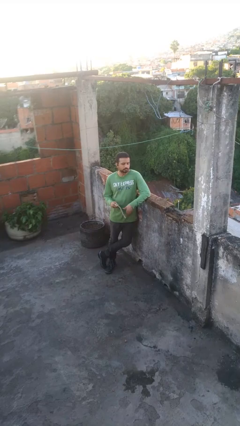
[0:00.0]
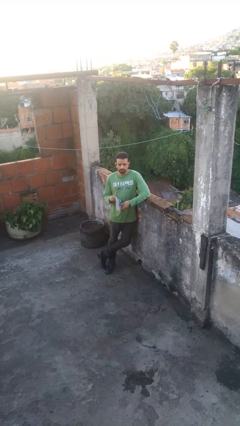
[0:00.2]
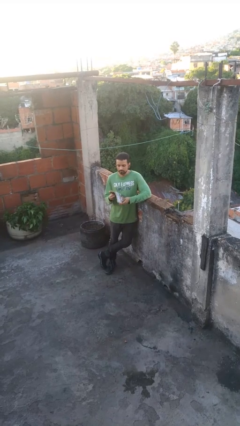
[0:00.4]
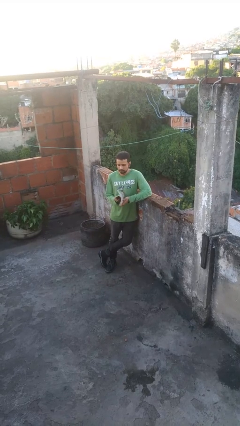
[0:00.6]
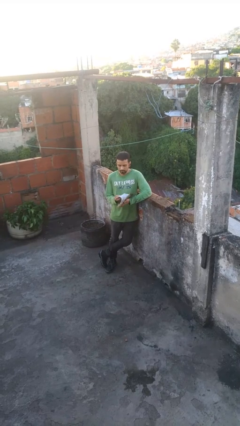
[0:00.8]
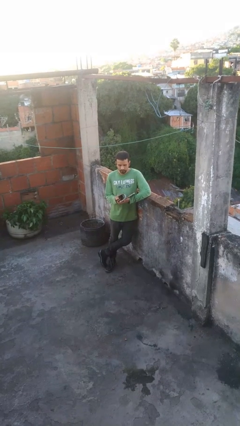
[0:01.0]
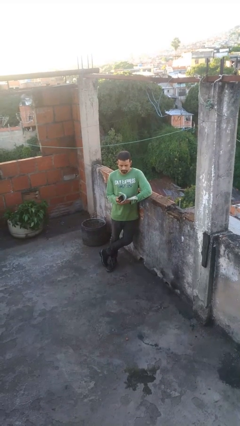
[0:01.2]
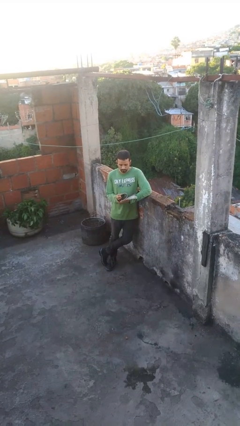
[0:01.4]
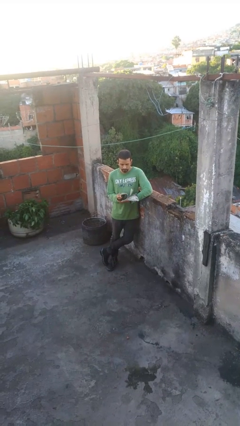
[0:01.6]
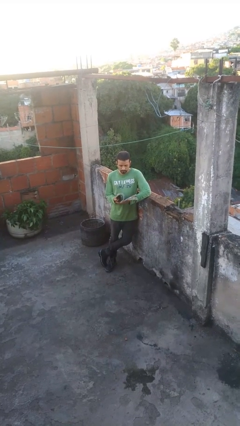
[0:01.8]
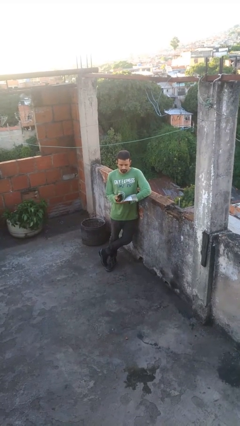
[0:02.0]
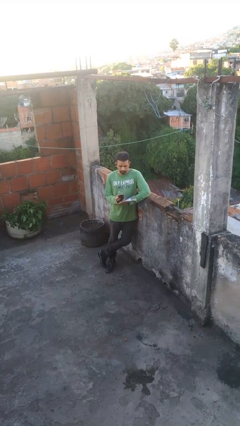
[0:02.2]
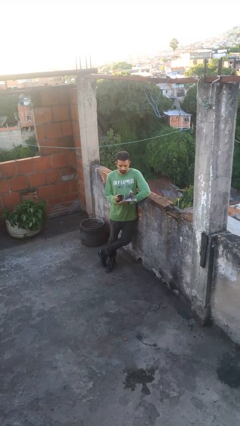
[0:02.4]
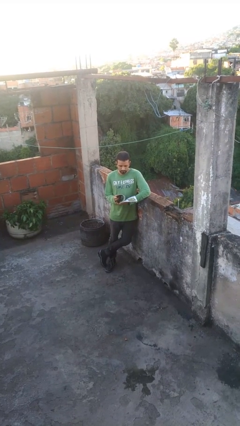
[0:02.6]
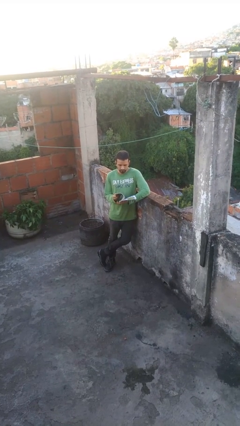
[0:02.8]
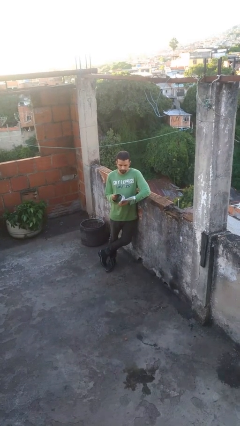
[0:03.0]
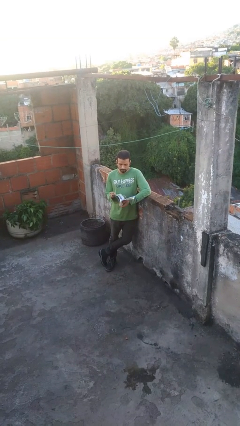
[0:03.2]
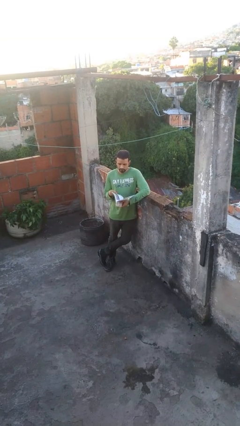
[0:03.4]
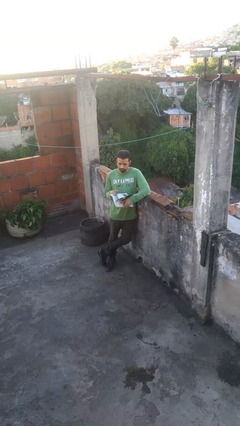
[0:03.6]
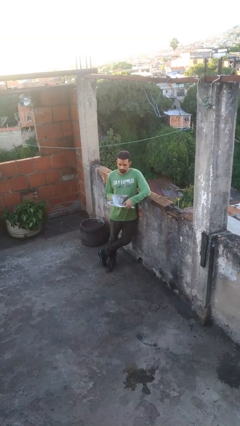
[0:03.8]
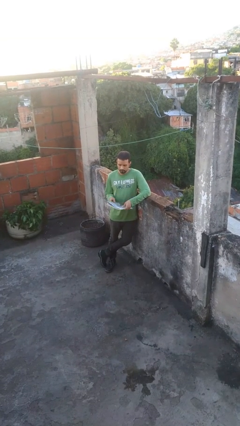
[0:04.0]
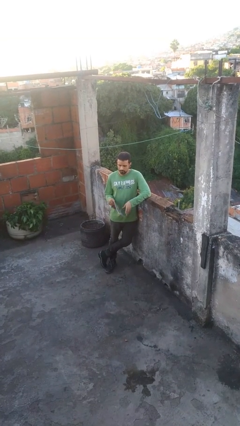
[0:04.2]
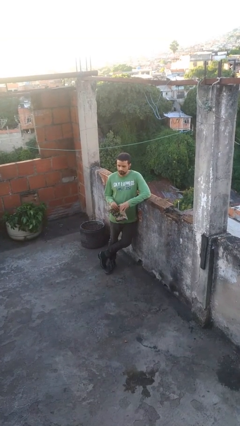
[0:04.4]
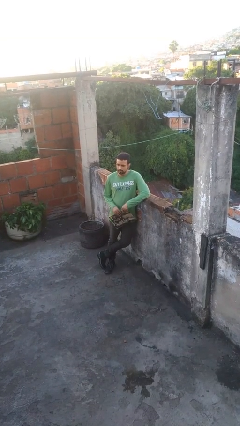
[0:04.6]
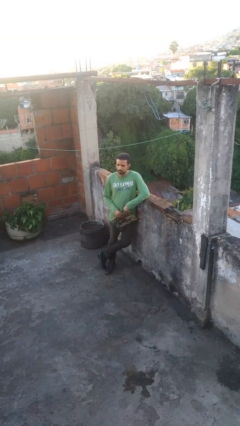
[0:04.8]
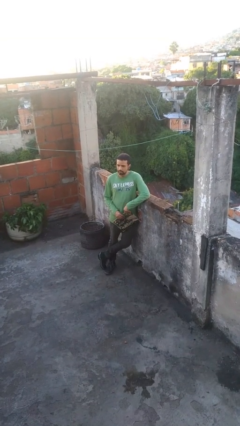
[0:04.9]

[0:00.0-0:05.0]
person reads magazine

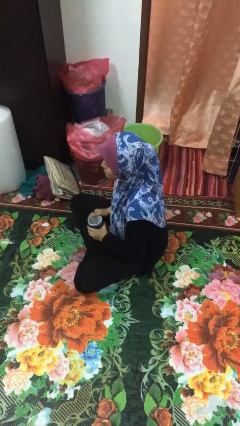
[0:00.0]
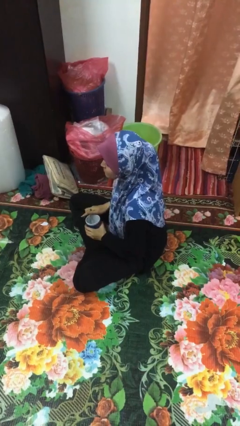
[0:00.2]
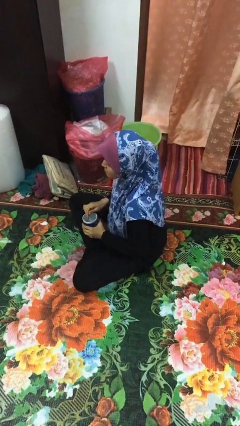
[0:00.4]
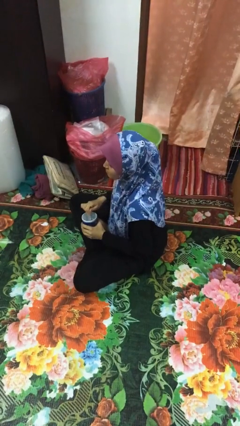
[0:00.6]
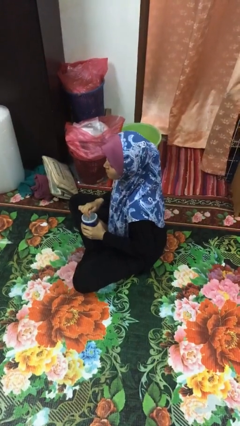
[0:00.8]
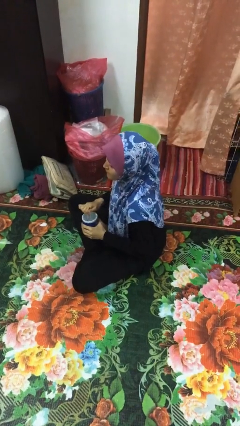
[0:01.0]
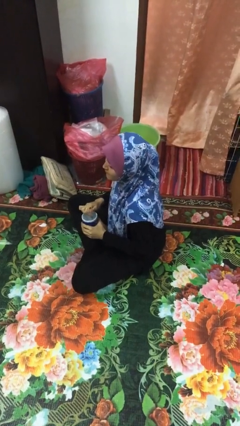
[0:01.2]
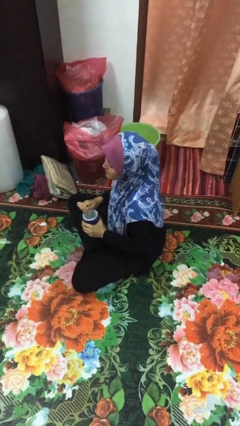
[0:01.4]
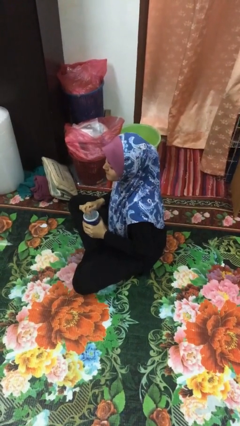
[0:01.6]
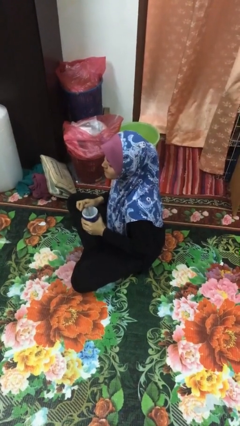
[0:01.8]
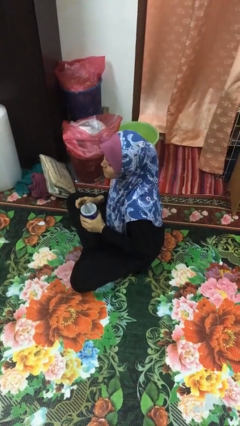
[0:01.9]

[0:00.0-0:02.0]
person stirs mug

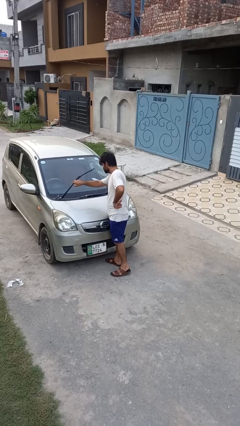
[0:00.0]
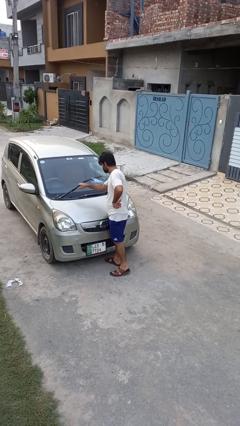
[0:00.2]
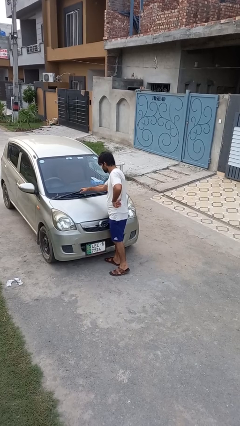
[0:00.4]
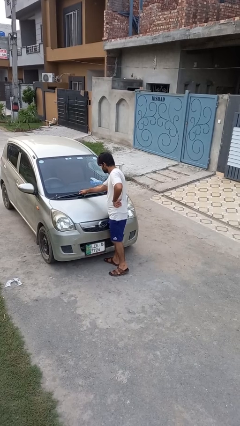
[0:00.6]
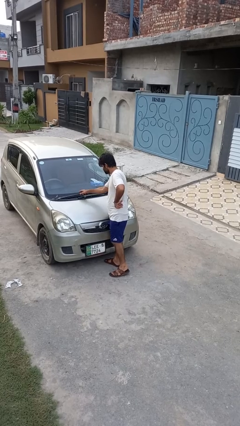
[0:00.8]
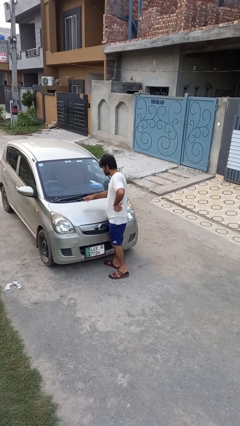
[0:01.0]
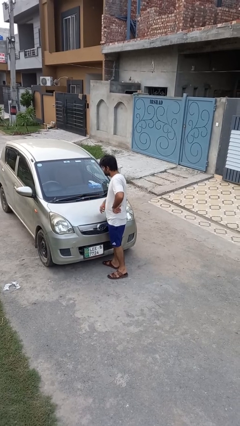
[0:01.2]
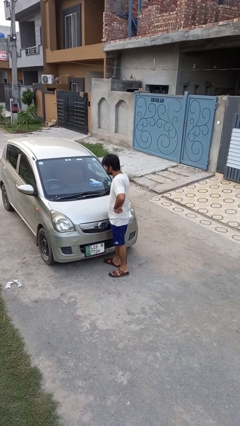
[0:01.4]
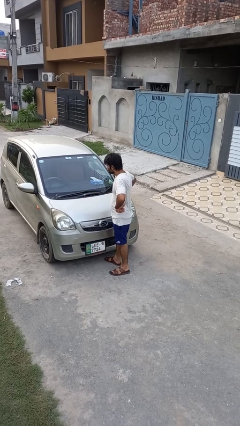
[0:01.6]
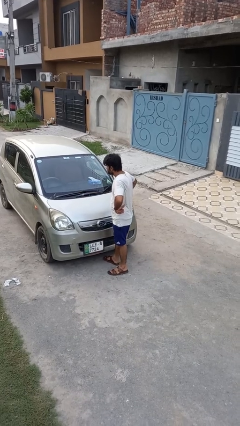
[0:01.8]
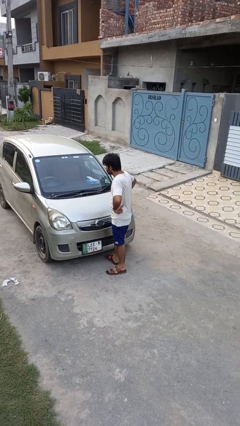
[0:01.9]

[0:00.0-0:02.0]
person flips down car wipers

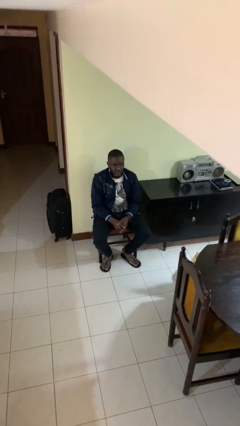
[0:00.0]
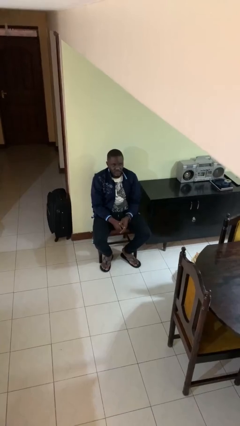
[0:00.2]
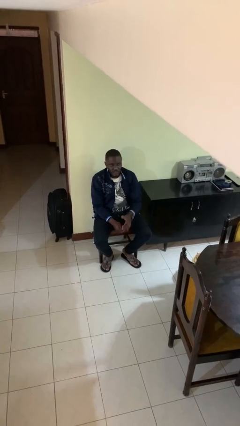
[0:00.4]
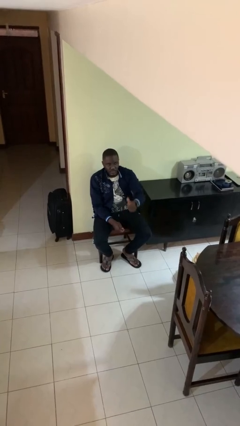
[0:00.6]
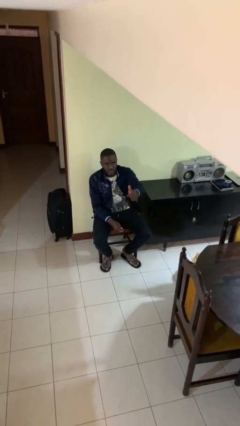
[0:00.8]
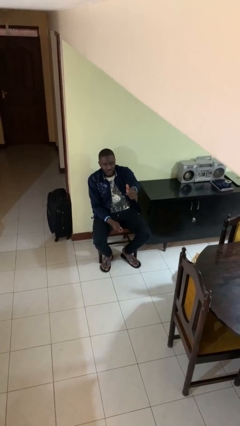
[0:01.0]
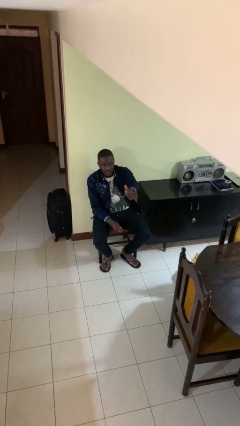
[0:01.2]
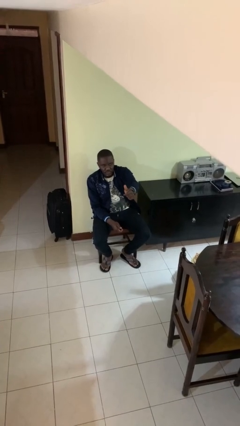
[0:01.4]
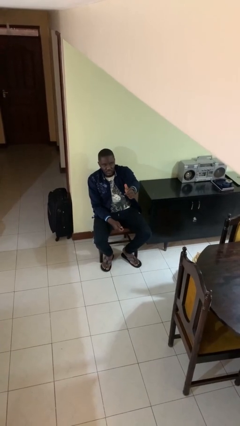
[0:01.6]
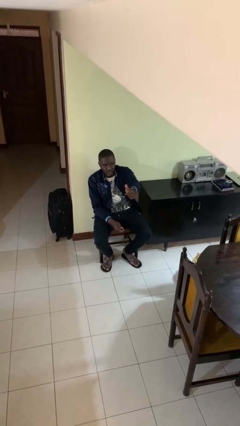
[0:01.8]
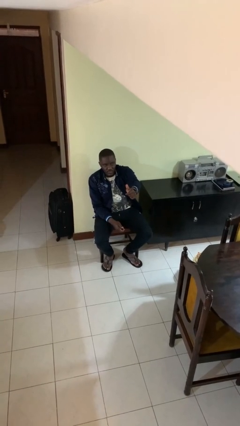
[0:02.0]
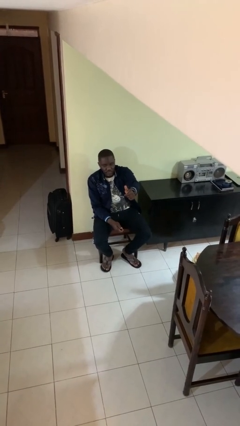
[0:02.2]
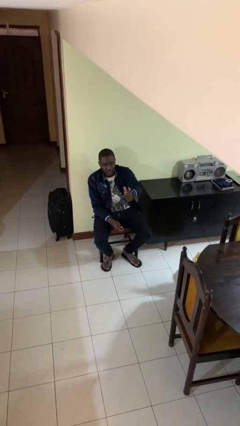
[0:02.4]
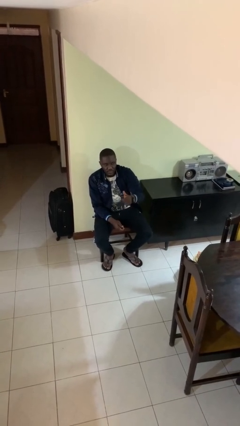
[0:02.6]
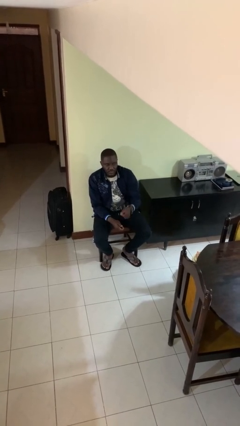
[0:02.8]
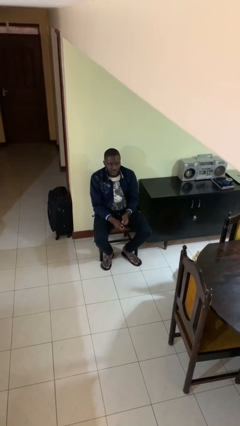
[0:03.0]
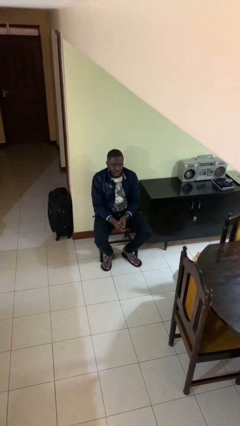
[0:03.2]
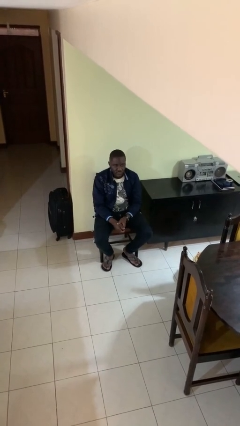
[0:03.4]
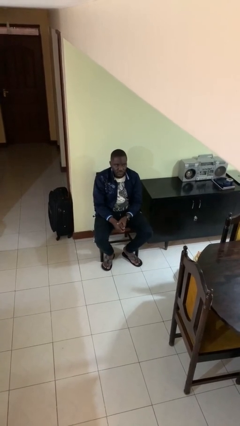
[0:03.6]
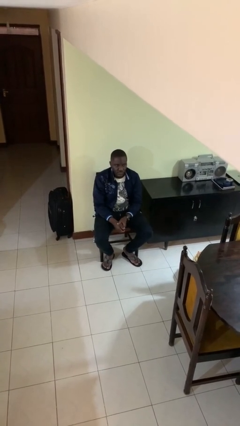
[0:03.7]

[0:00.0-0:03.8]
person gestures thumbs up

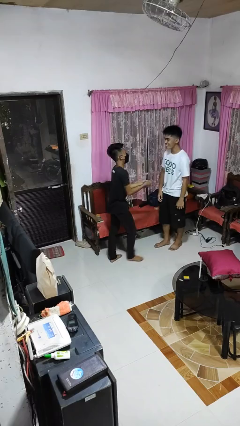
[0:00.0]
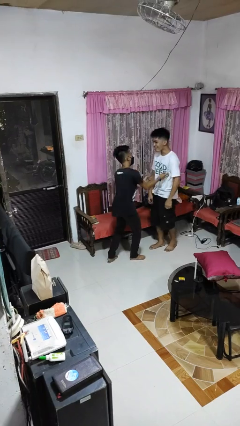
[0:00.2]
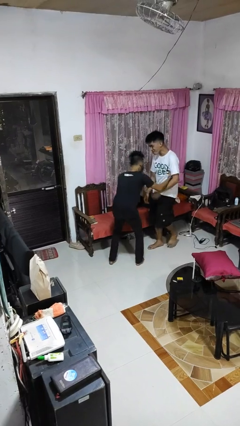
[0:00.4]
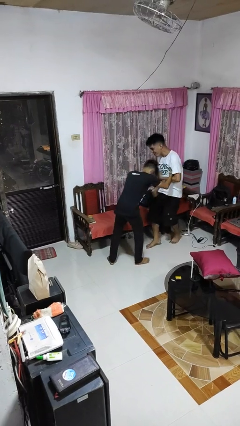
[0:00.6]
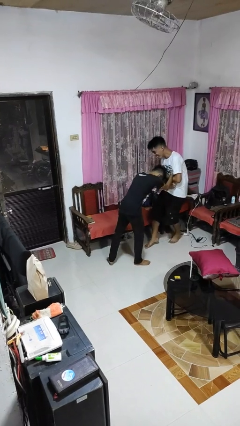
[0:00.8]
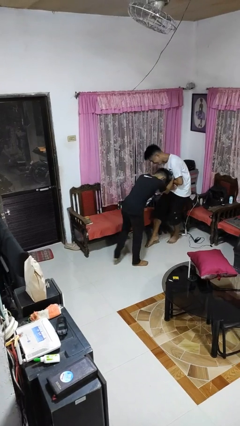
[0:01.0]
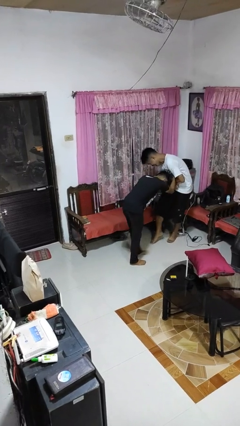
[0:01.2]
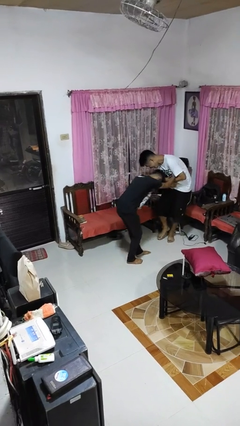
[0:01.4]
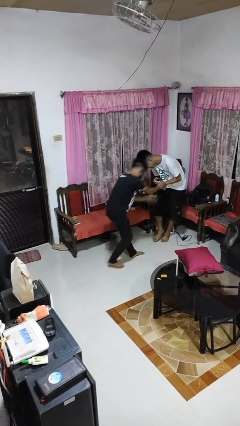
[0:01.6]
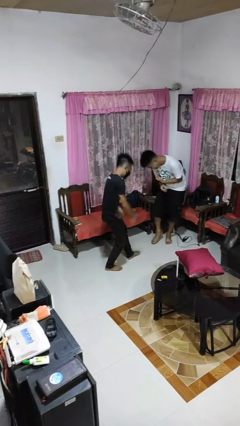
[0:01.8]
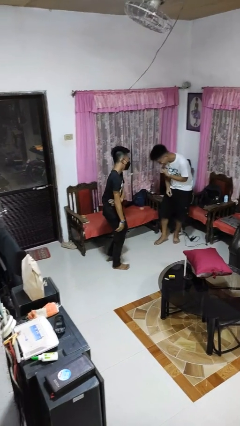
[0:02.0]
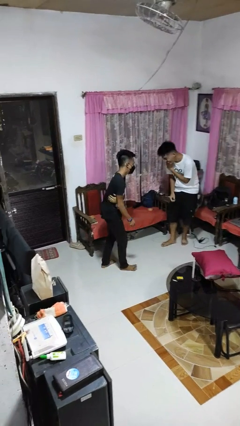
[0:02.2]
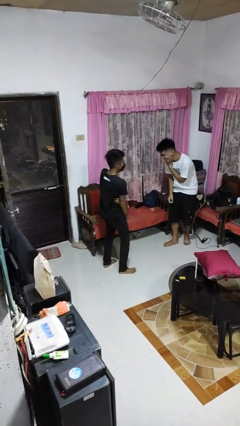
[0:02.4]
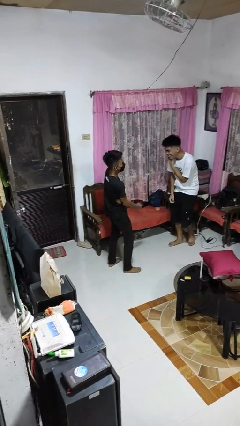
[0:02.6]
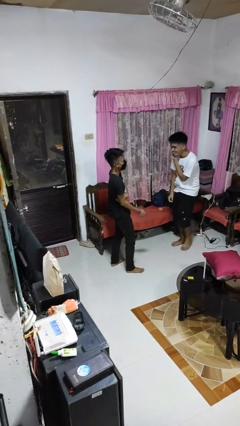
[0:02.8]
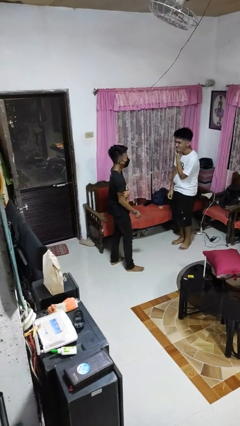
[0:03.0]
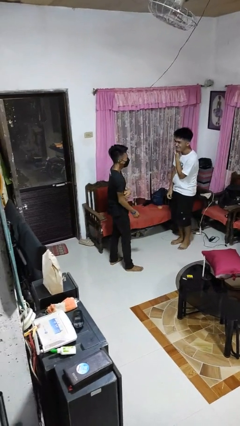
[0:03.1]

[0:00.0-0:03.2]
person tickles person

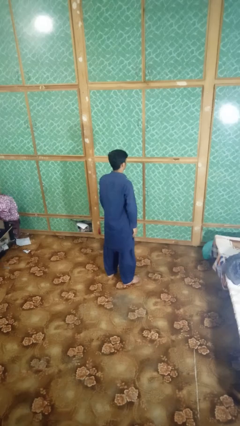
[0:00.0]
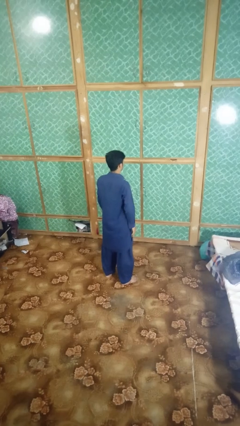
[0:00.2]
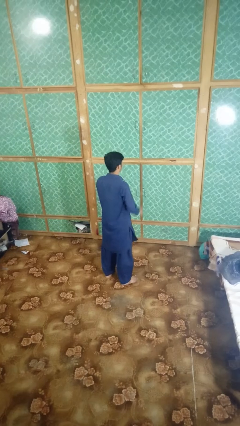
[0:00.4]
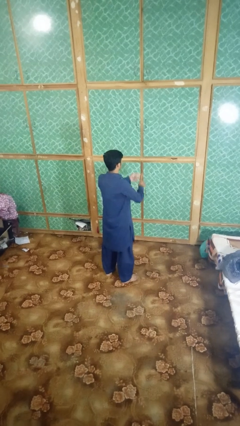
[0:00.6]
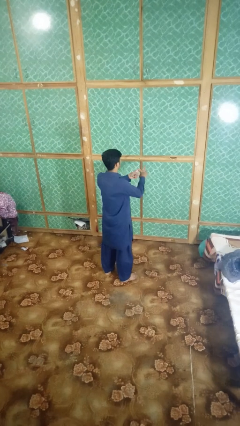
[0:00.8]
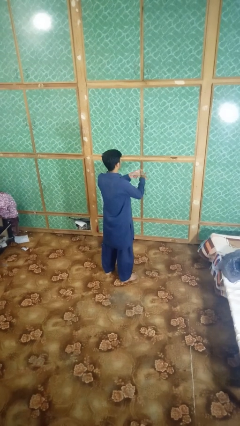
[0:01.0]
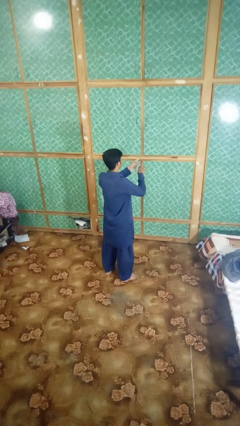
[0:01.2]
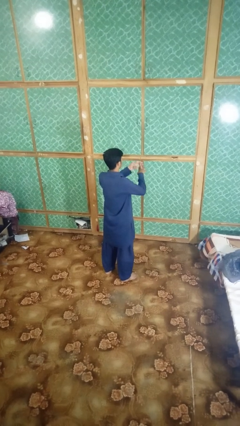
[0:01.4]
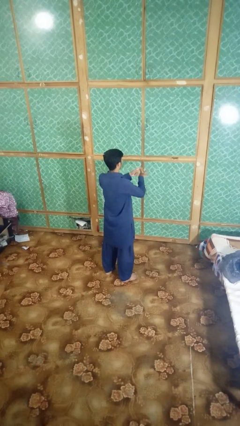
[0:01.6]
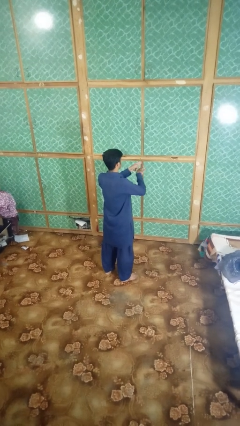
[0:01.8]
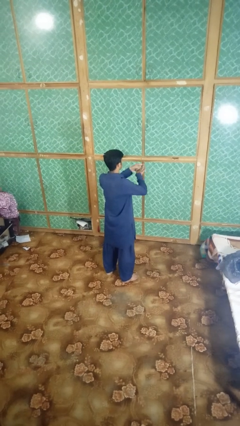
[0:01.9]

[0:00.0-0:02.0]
person snaps fingers
